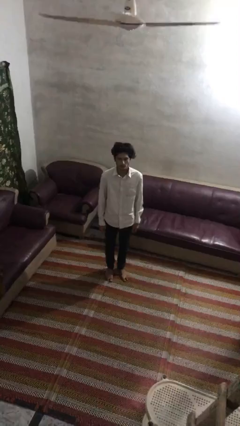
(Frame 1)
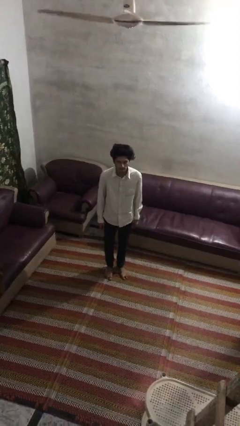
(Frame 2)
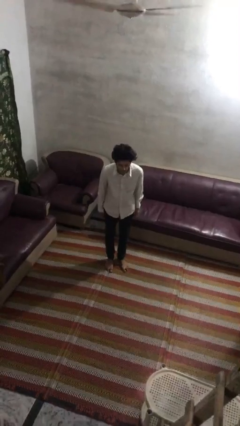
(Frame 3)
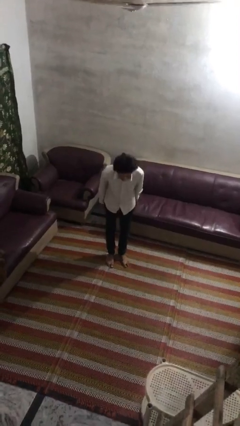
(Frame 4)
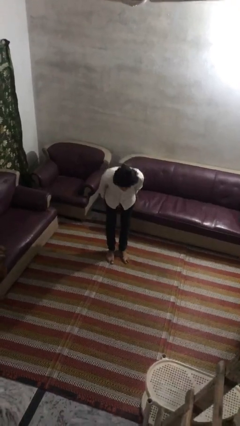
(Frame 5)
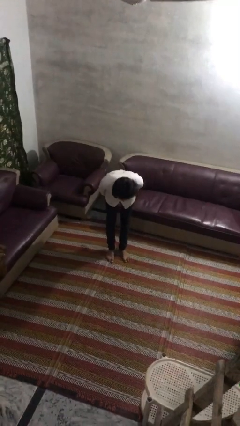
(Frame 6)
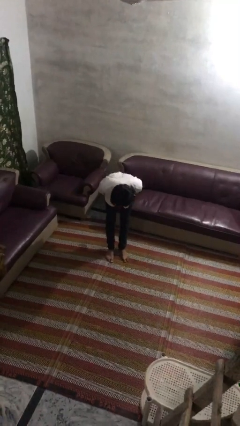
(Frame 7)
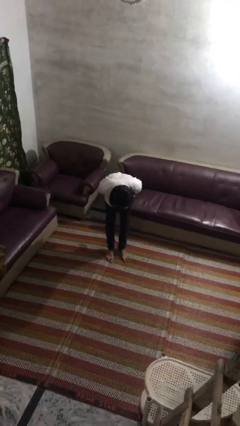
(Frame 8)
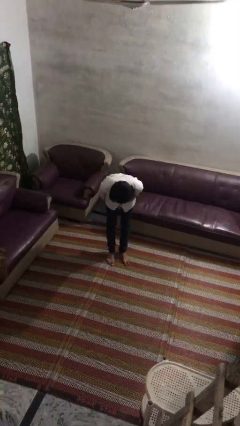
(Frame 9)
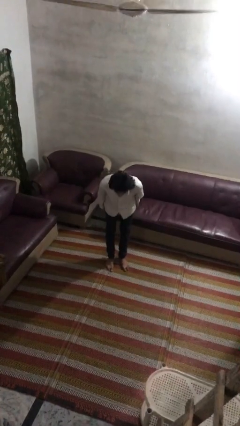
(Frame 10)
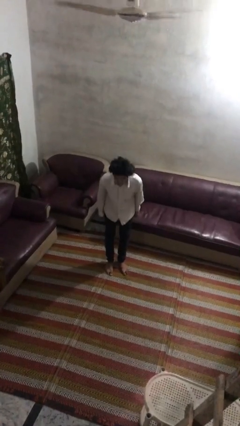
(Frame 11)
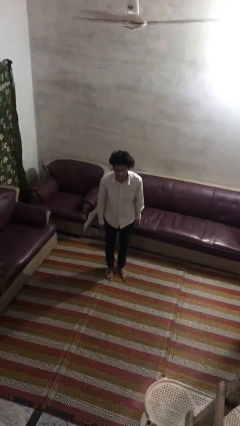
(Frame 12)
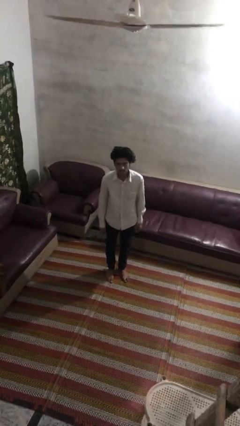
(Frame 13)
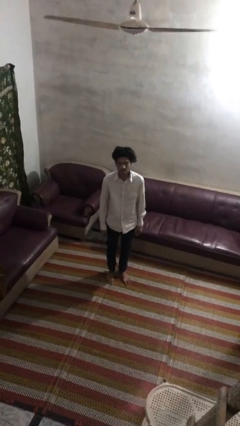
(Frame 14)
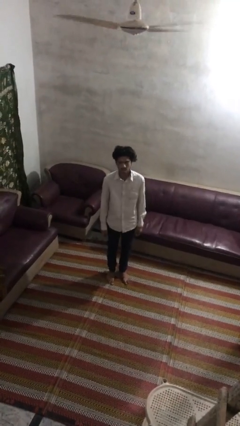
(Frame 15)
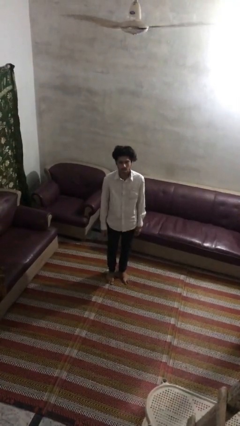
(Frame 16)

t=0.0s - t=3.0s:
person bows

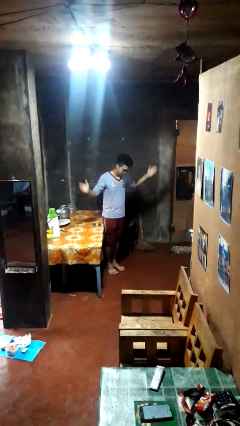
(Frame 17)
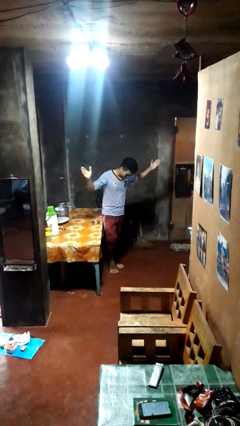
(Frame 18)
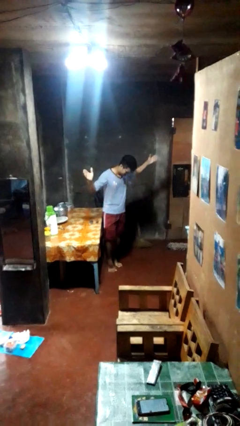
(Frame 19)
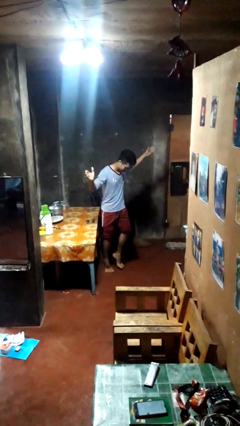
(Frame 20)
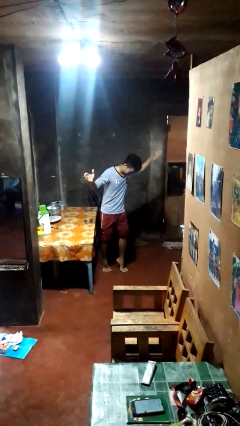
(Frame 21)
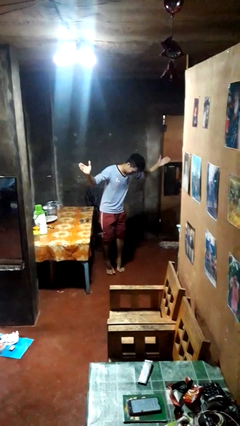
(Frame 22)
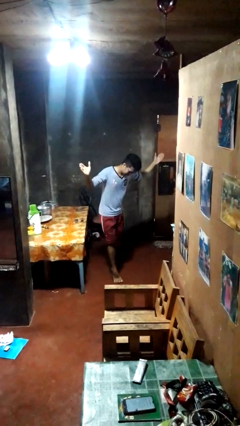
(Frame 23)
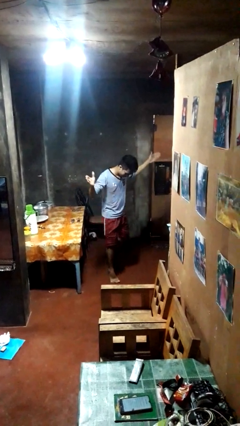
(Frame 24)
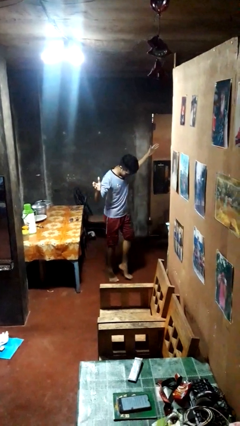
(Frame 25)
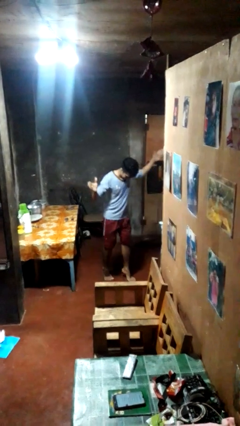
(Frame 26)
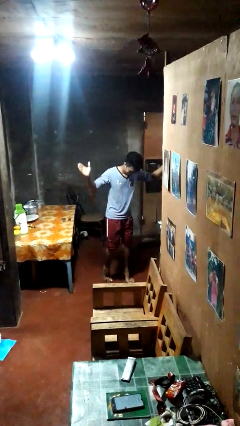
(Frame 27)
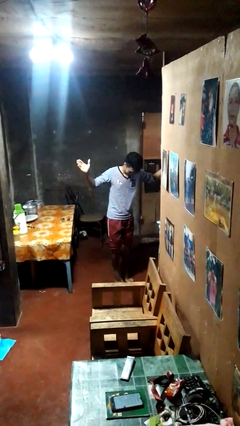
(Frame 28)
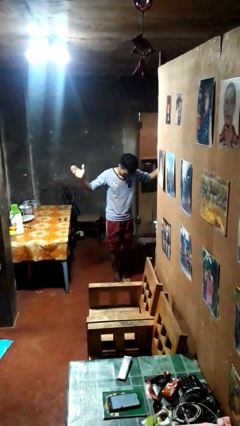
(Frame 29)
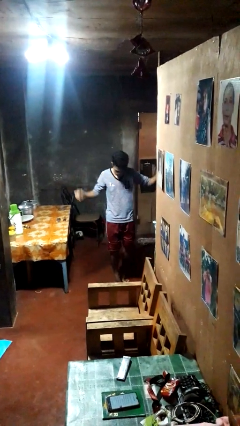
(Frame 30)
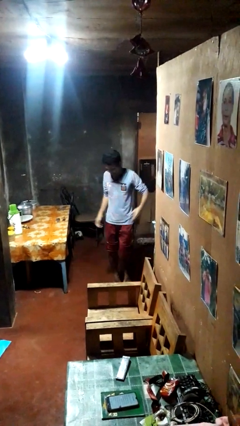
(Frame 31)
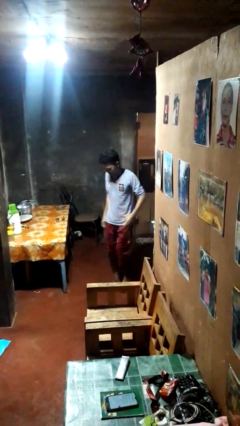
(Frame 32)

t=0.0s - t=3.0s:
person walks tiptoe

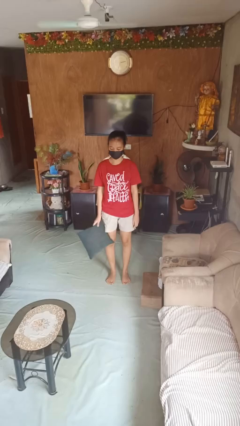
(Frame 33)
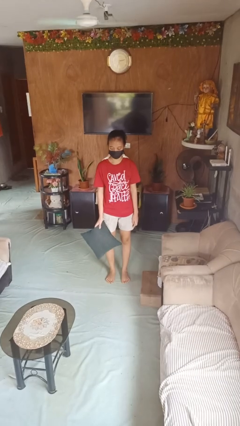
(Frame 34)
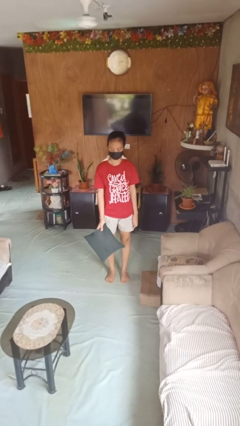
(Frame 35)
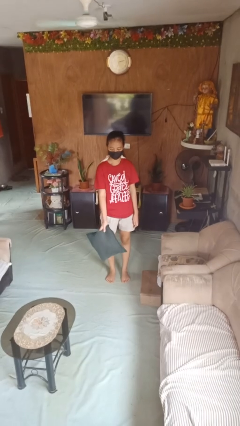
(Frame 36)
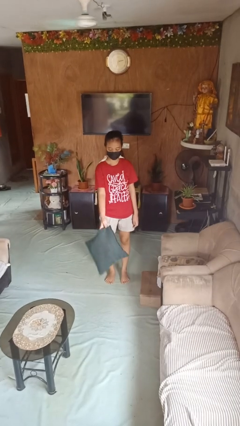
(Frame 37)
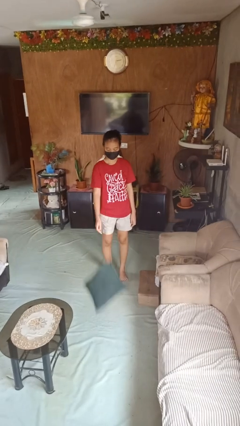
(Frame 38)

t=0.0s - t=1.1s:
person throws object to ground

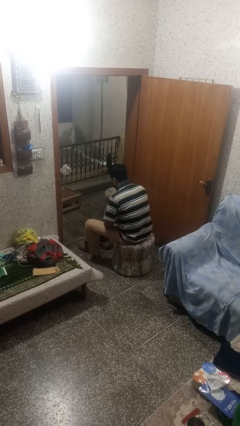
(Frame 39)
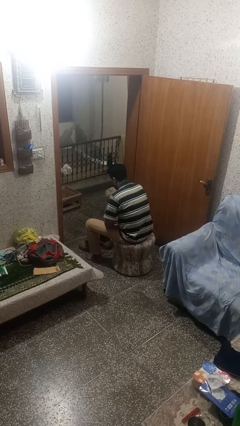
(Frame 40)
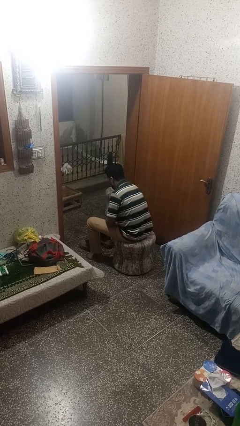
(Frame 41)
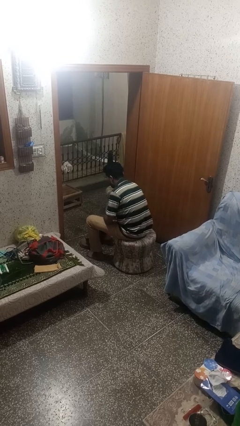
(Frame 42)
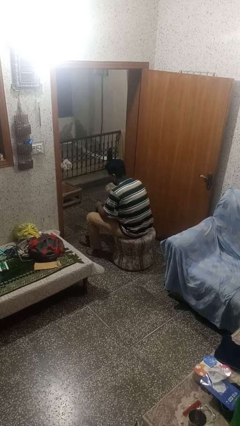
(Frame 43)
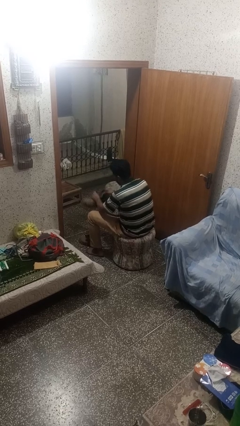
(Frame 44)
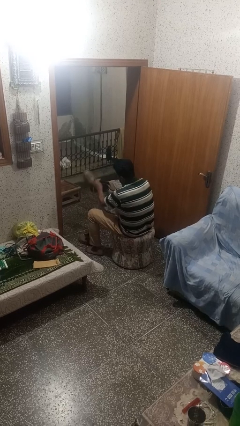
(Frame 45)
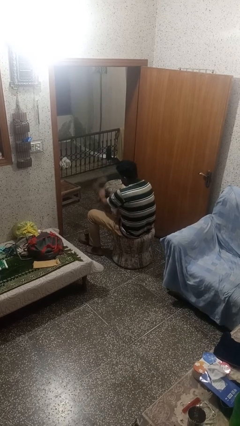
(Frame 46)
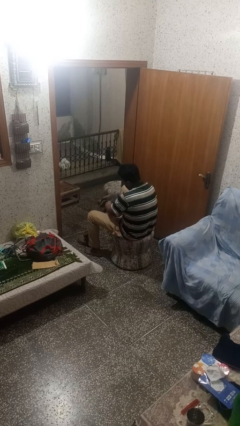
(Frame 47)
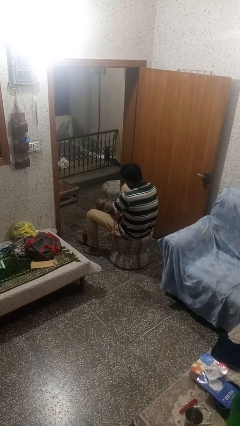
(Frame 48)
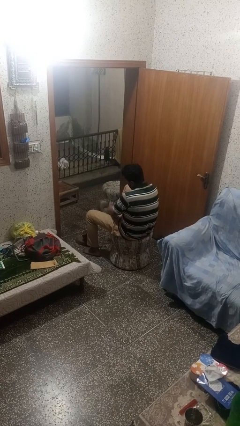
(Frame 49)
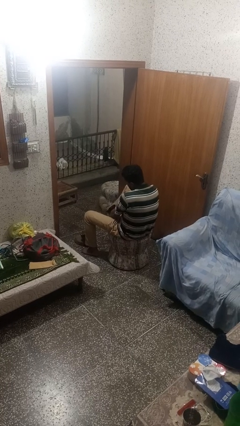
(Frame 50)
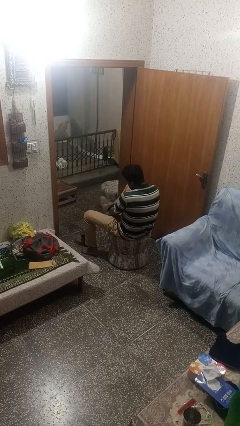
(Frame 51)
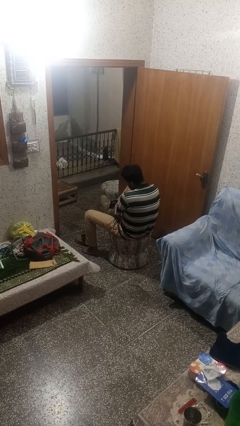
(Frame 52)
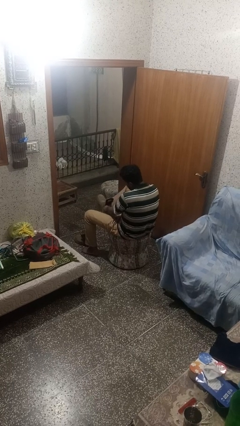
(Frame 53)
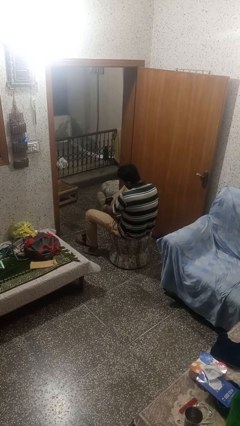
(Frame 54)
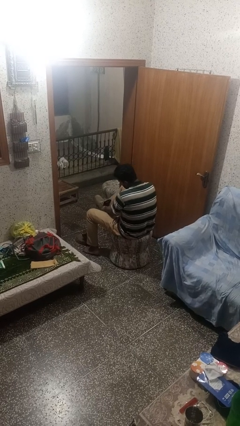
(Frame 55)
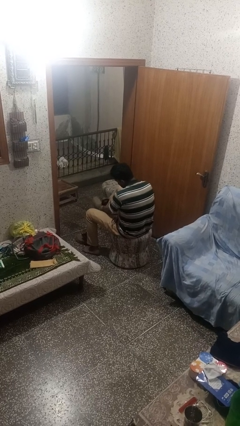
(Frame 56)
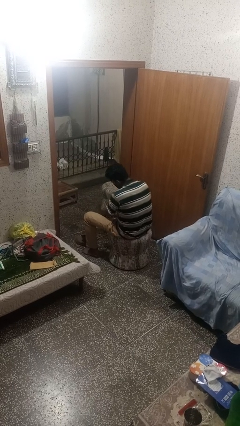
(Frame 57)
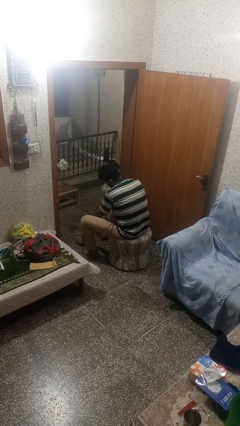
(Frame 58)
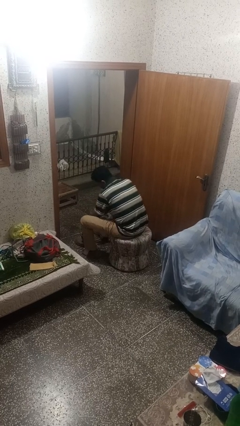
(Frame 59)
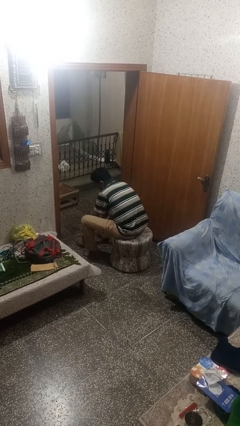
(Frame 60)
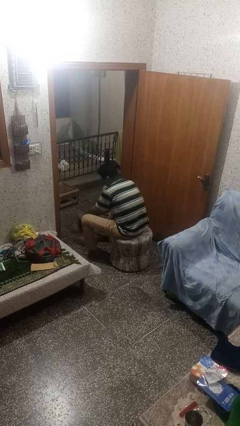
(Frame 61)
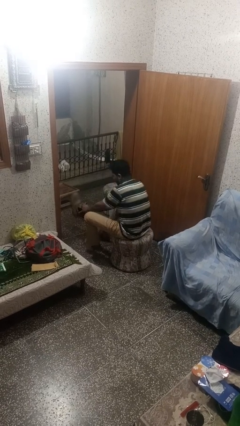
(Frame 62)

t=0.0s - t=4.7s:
person puts on shoes

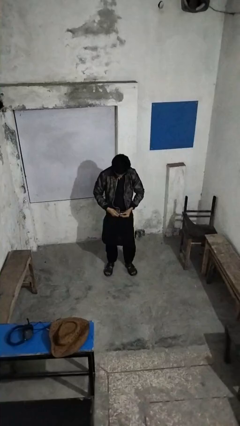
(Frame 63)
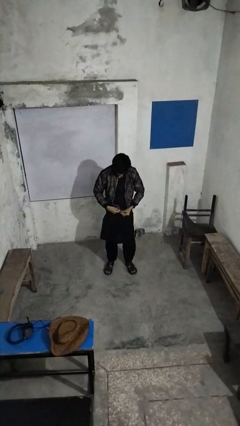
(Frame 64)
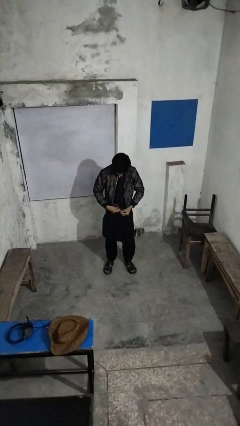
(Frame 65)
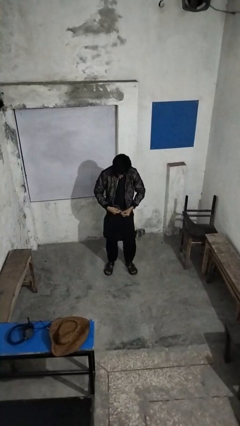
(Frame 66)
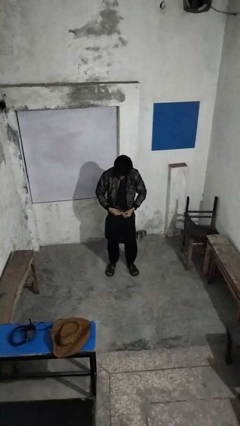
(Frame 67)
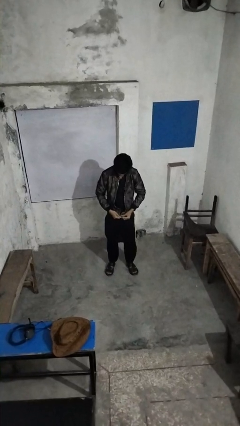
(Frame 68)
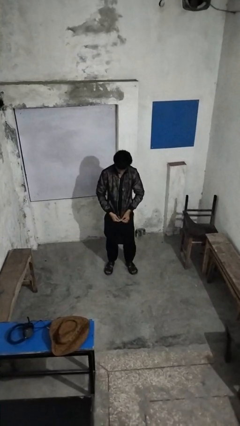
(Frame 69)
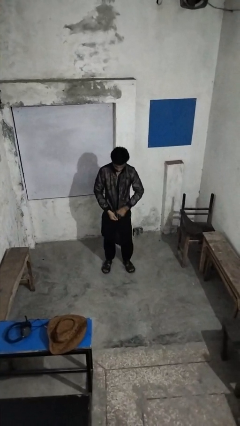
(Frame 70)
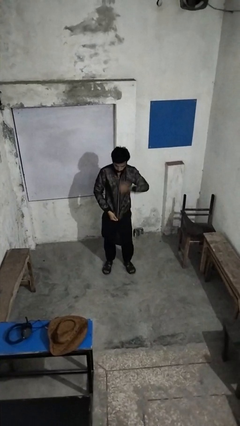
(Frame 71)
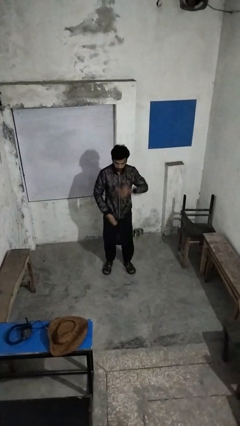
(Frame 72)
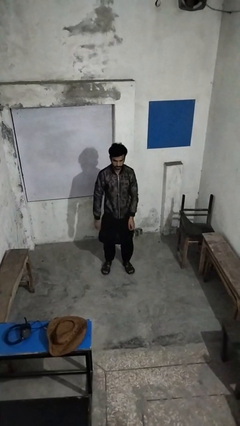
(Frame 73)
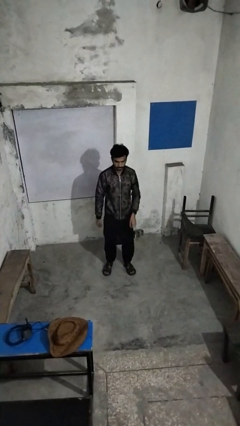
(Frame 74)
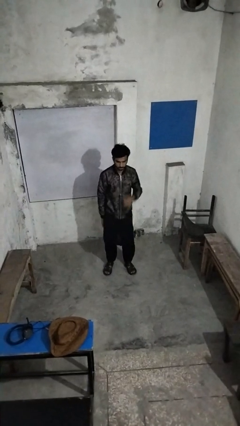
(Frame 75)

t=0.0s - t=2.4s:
person zips up jacket

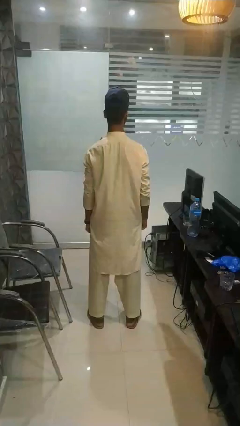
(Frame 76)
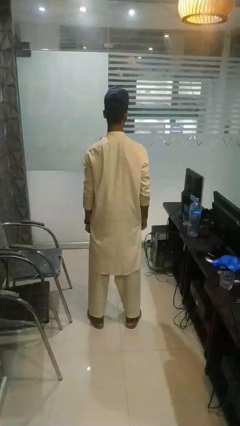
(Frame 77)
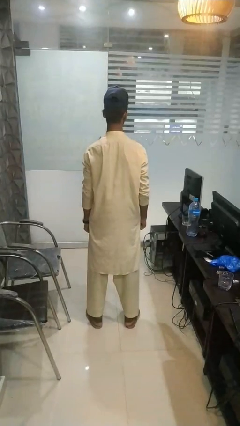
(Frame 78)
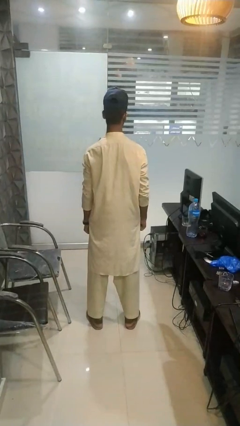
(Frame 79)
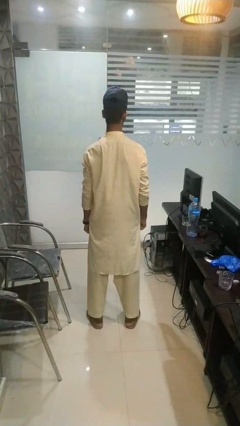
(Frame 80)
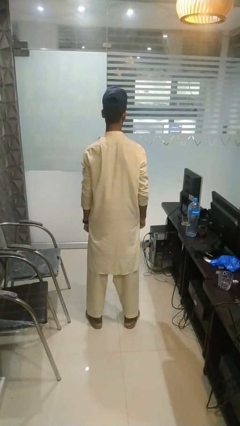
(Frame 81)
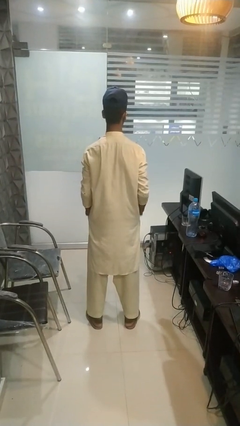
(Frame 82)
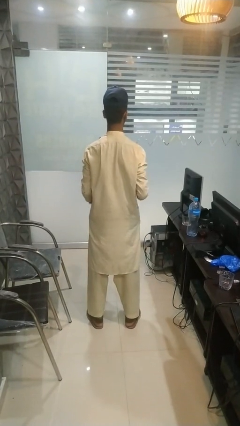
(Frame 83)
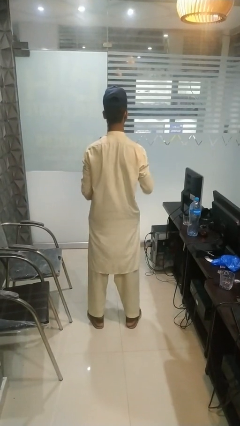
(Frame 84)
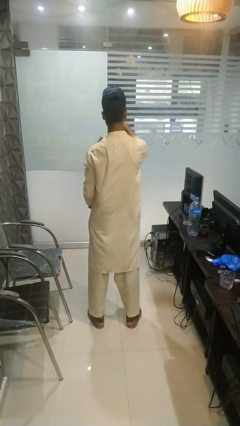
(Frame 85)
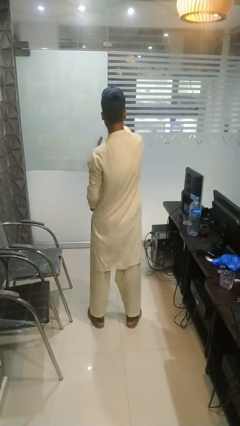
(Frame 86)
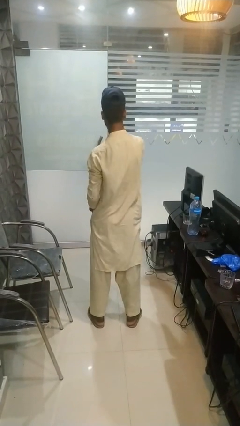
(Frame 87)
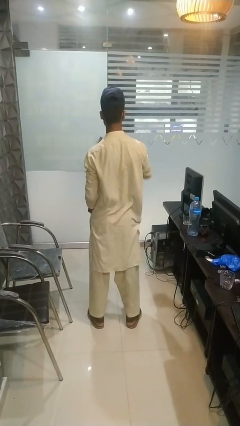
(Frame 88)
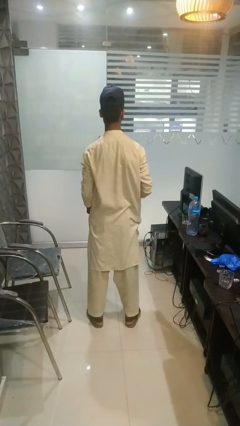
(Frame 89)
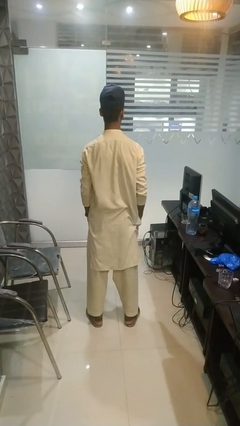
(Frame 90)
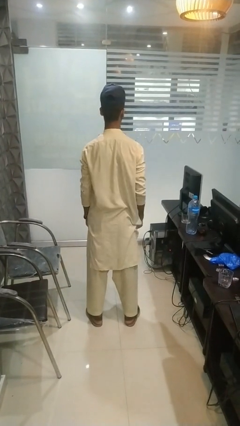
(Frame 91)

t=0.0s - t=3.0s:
person punches

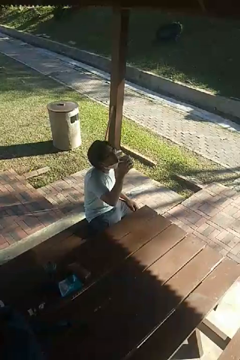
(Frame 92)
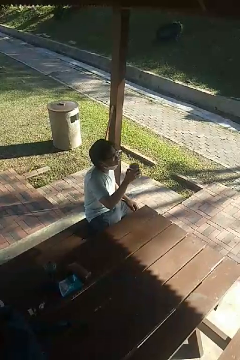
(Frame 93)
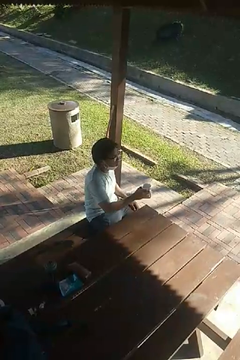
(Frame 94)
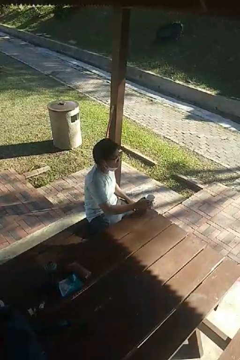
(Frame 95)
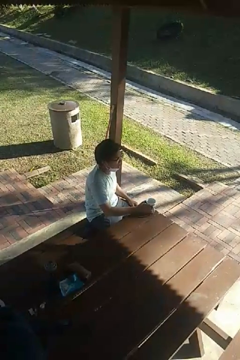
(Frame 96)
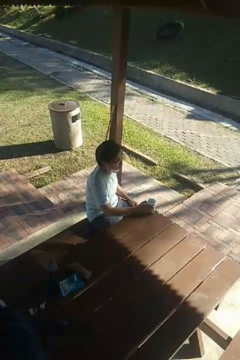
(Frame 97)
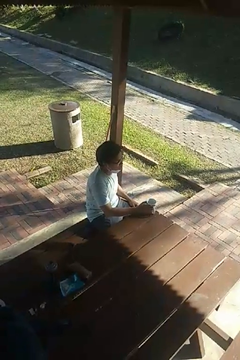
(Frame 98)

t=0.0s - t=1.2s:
person puts down object on table
